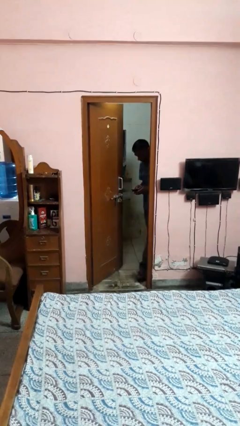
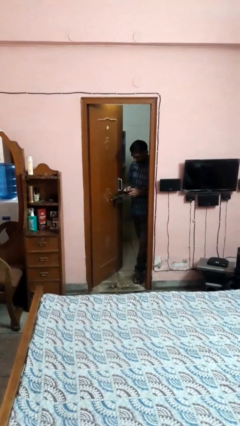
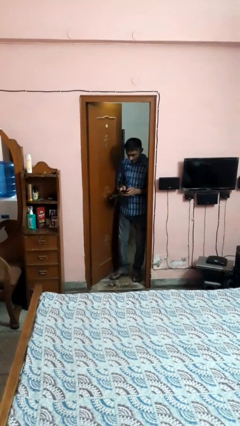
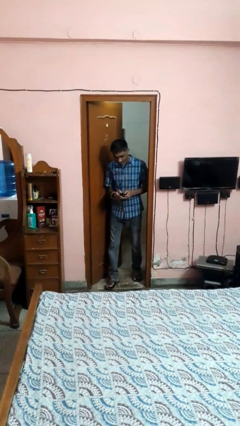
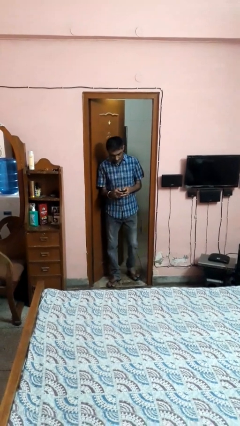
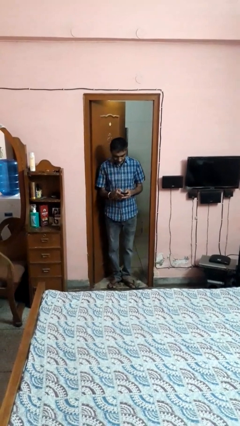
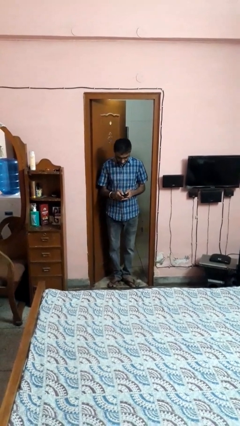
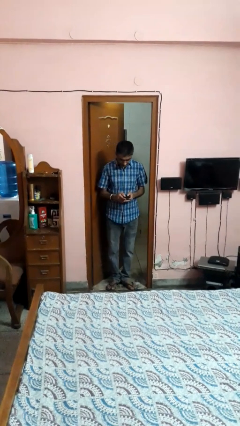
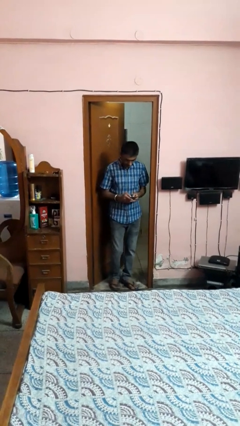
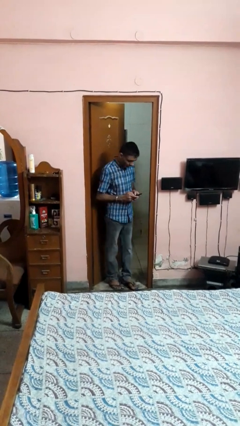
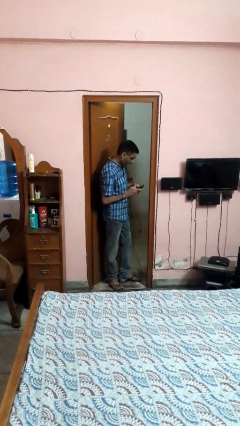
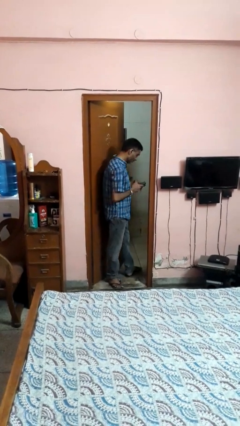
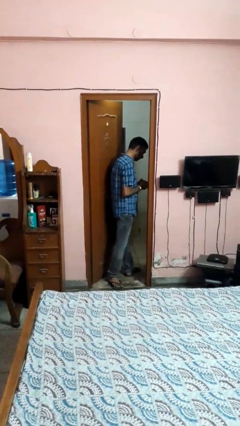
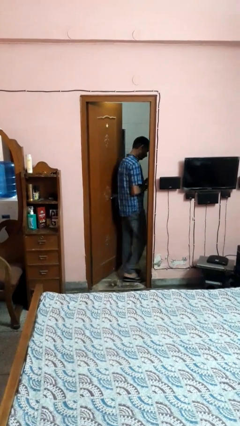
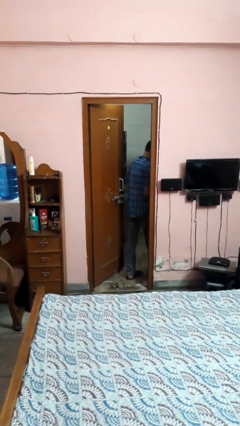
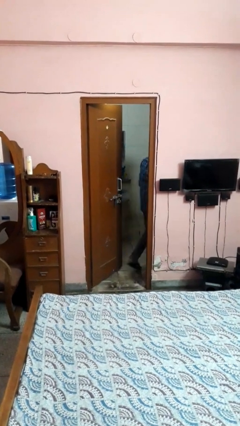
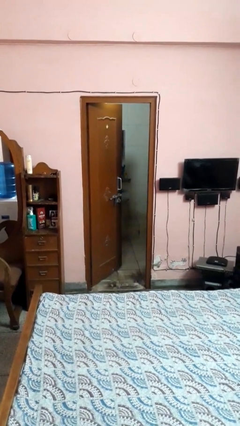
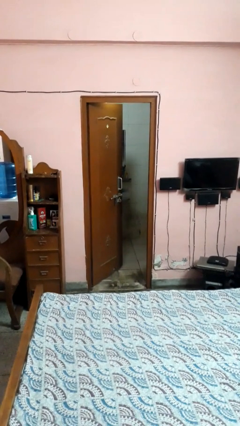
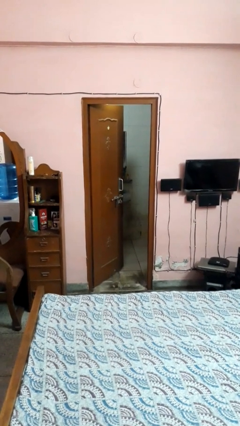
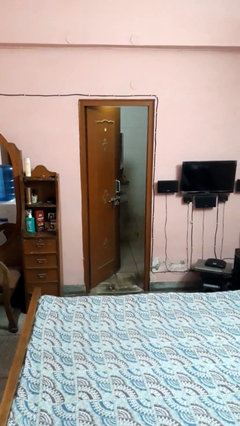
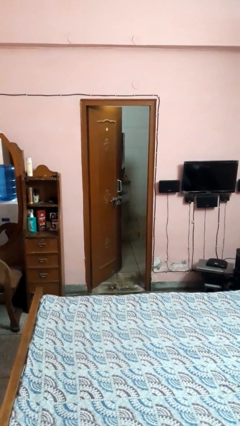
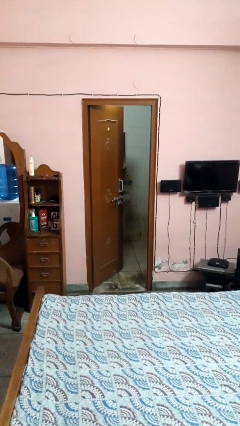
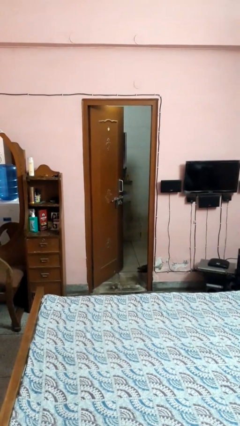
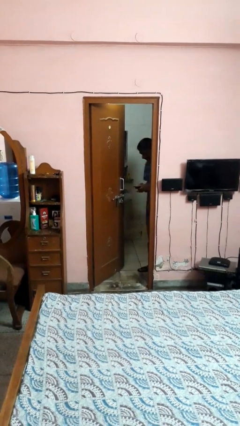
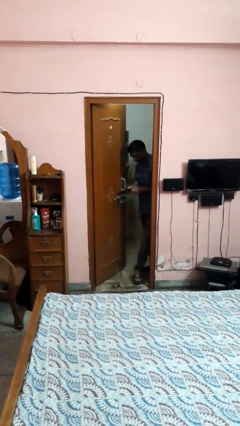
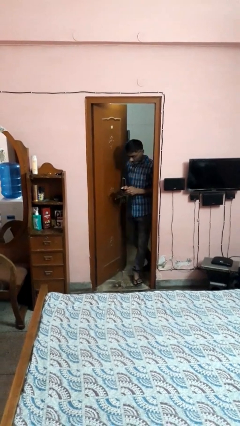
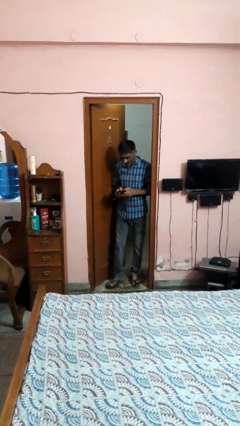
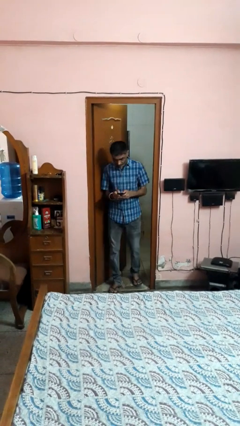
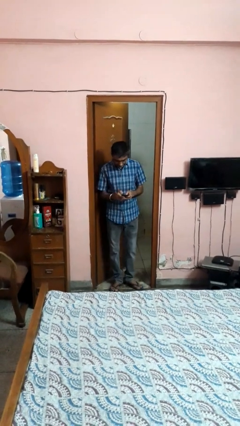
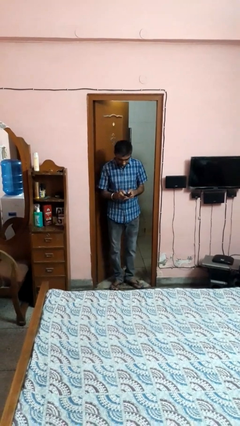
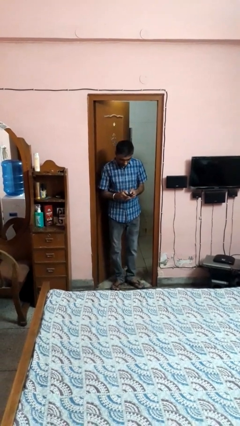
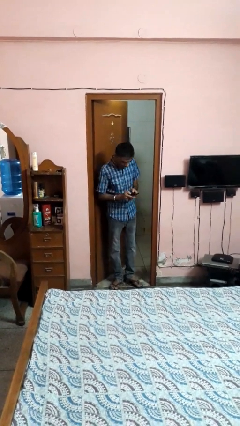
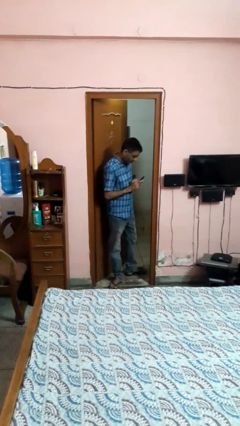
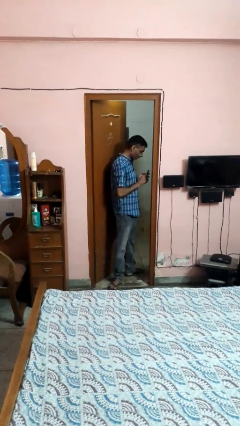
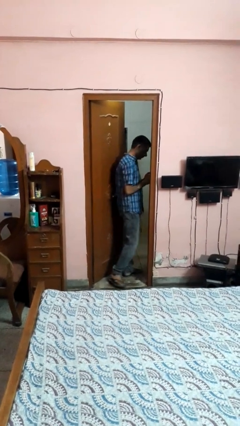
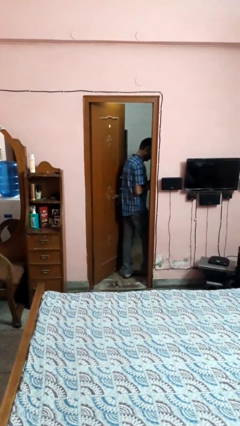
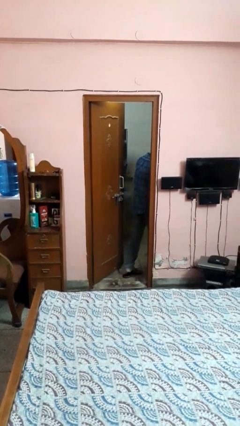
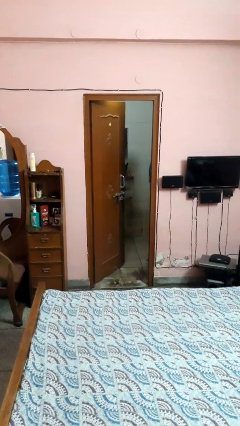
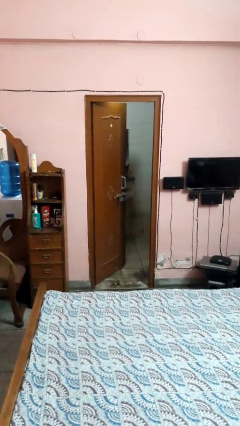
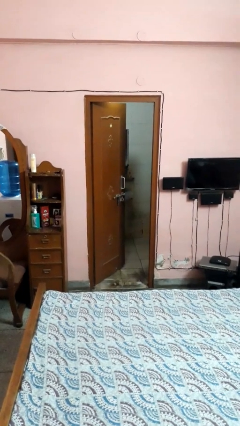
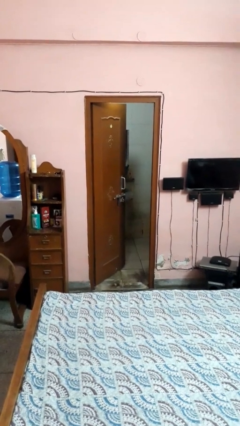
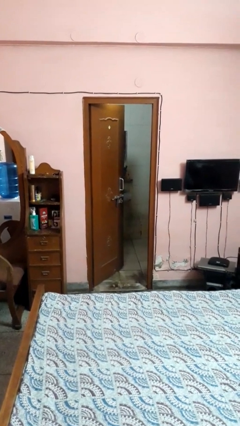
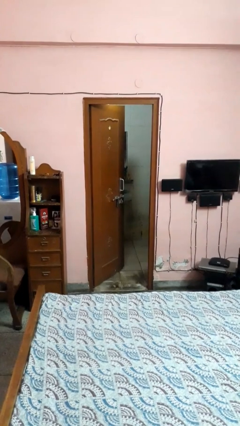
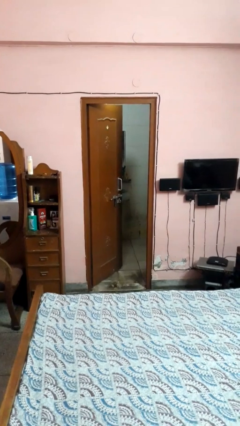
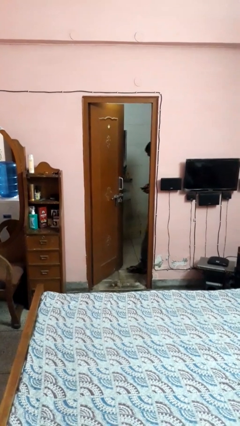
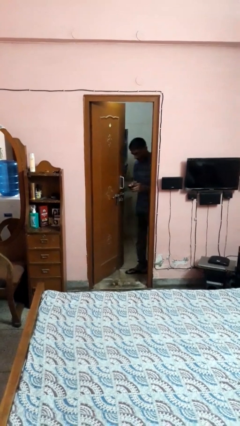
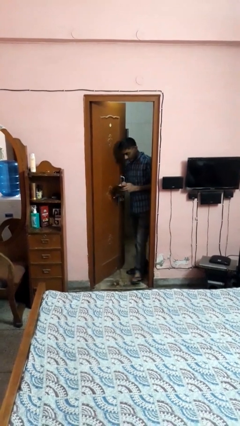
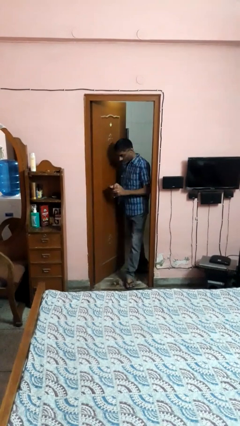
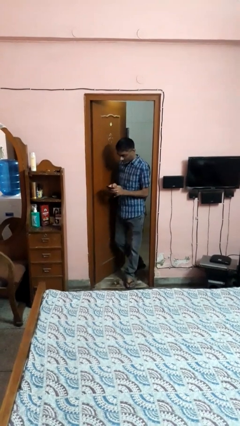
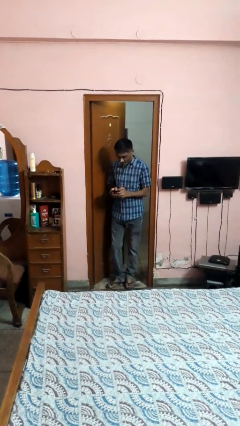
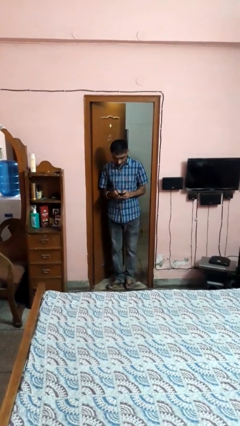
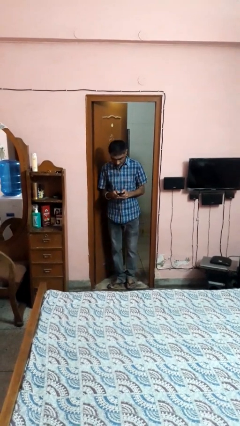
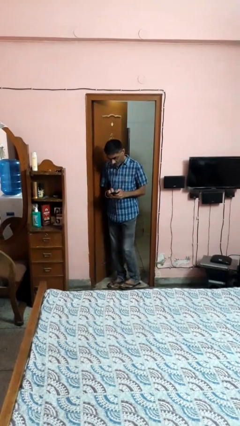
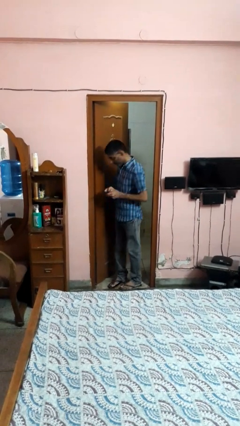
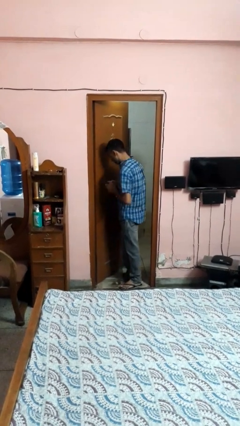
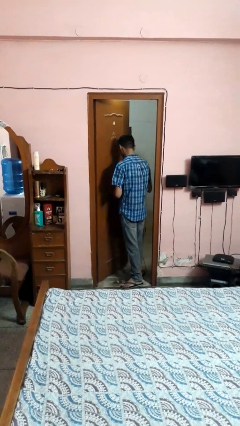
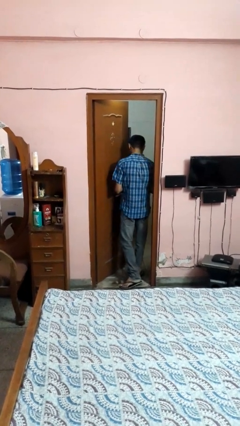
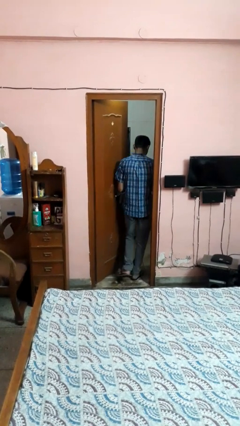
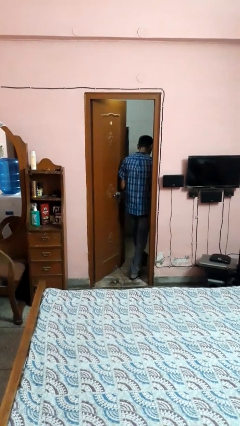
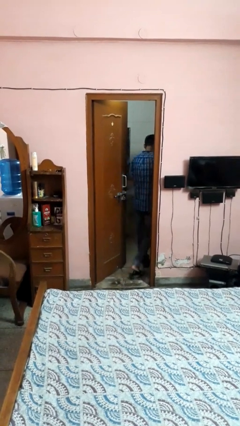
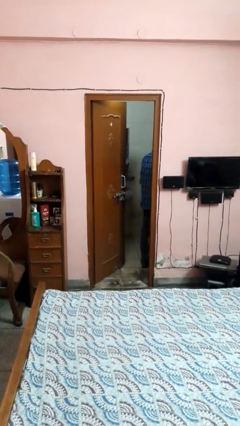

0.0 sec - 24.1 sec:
person texts on phone

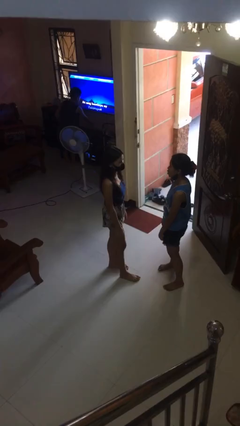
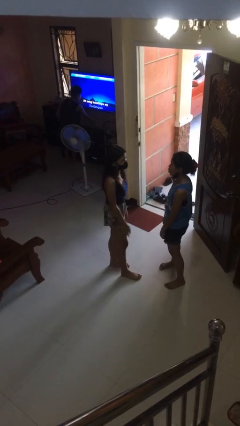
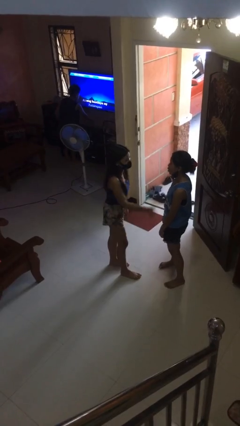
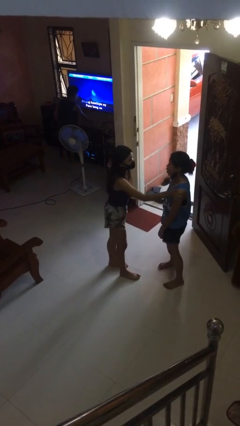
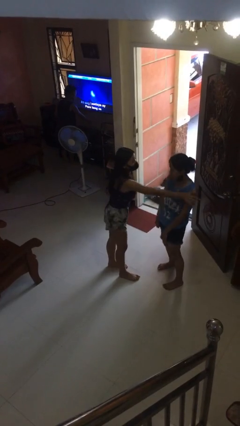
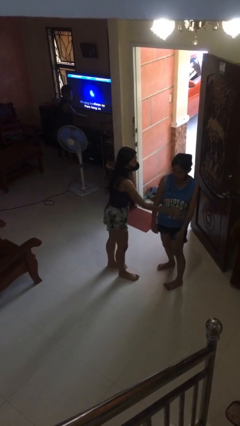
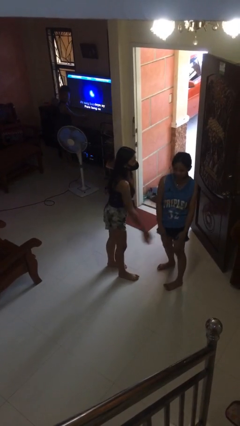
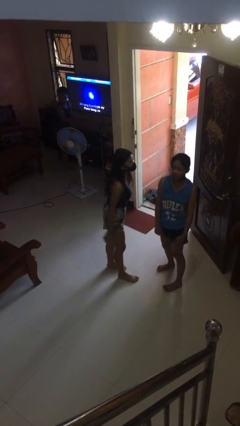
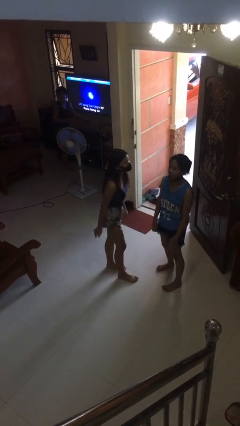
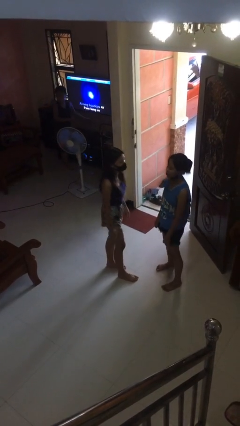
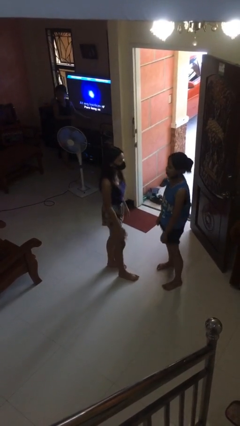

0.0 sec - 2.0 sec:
person shoves person

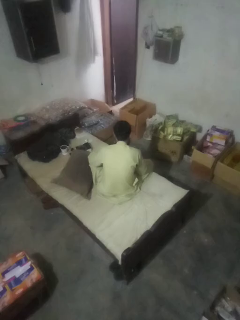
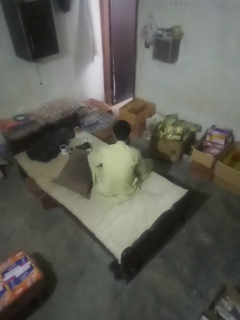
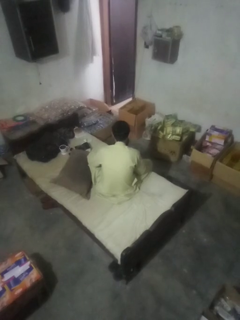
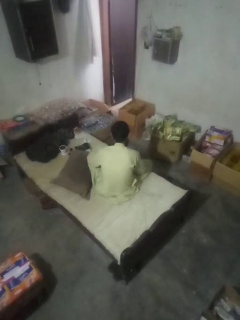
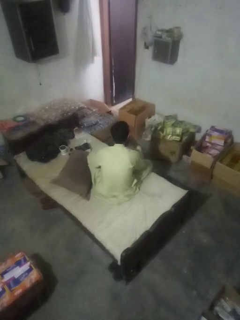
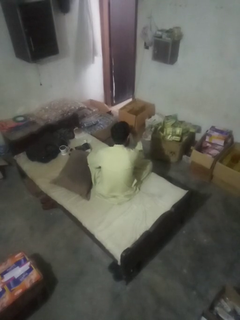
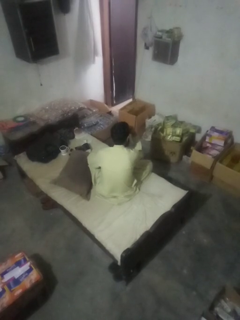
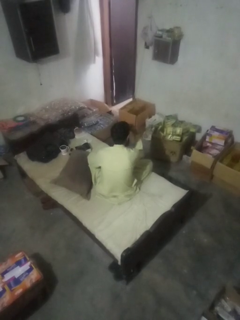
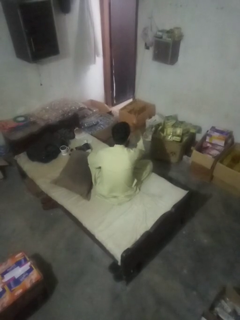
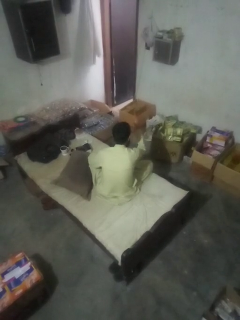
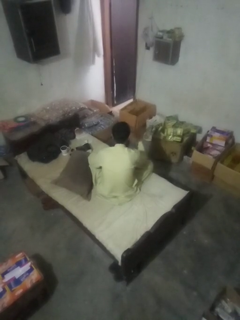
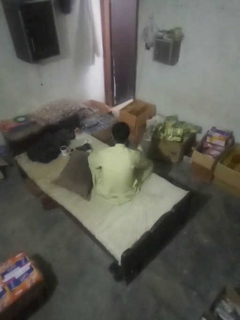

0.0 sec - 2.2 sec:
person gestures watch closely

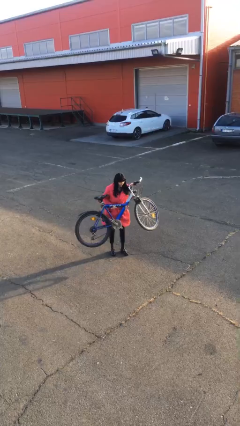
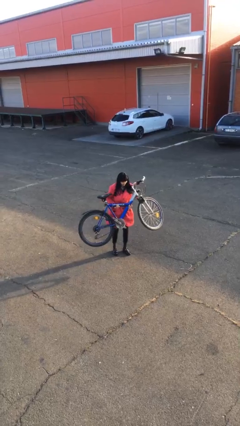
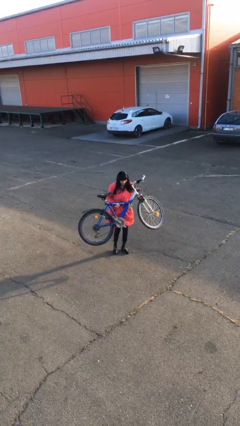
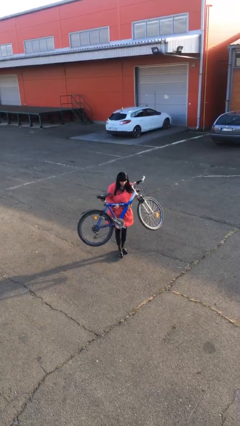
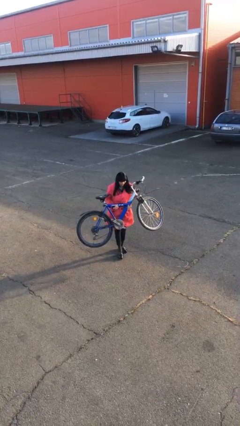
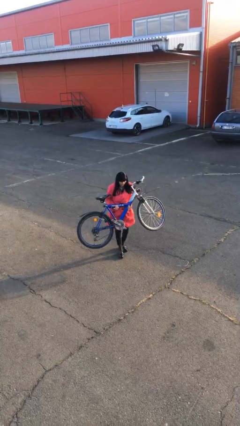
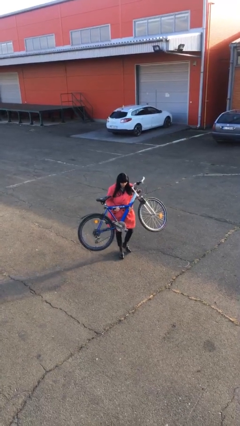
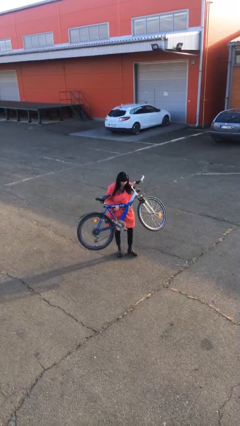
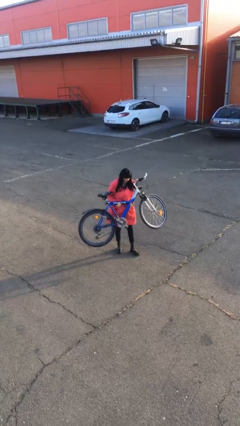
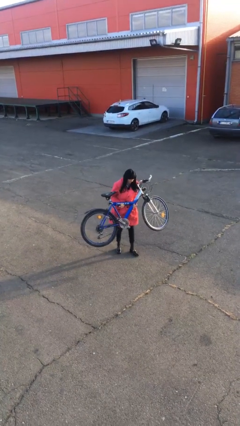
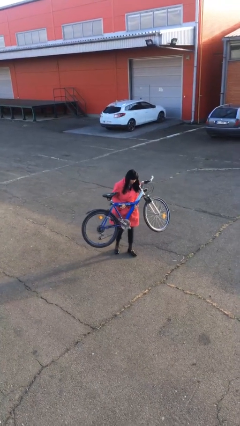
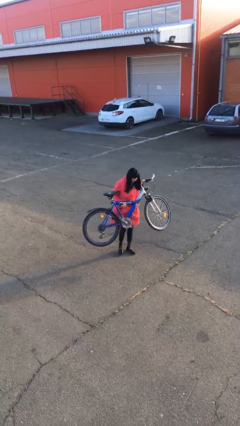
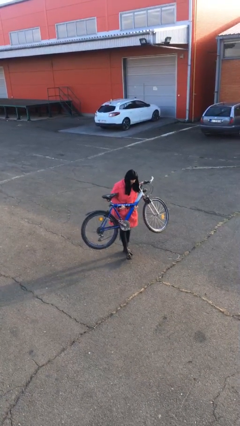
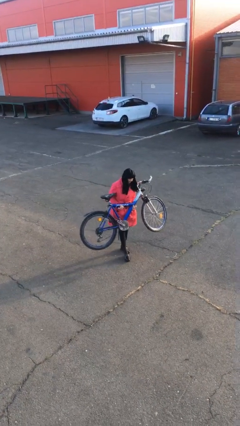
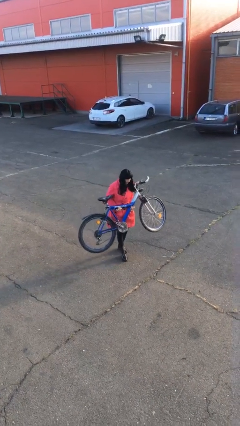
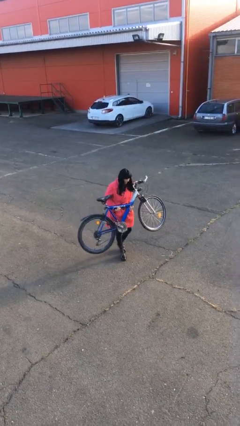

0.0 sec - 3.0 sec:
person carries heavy object
